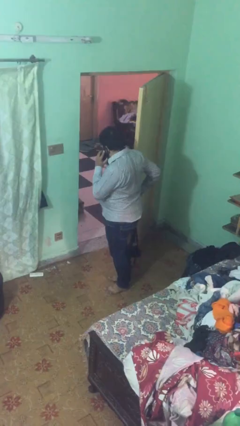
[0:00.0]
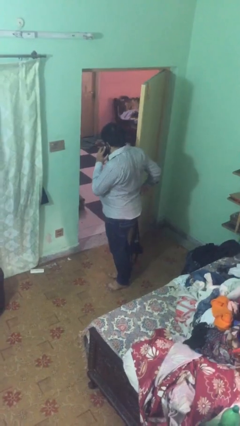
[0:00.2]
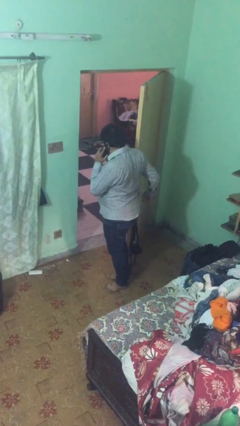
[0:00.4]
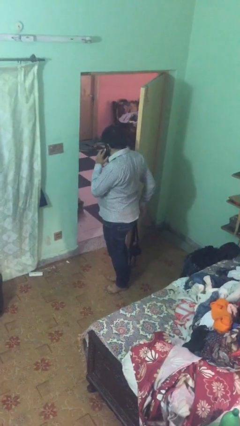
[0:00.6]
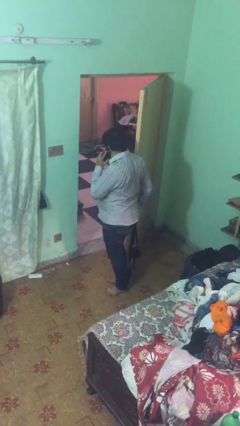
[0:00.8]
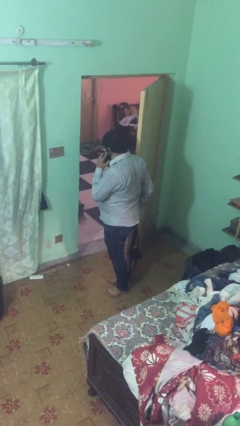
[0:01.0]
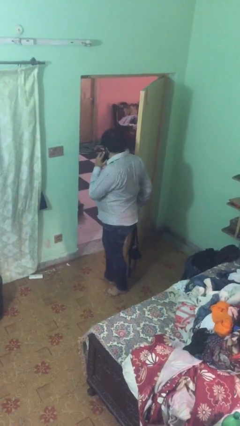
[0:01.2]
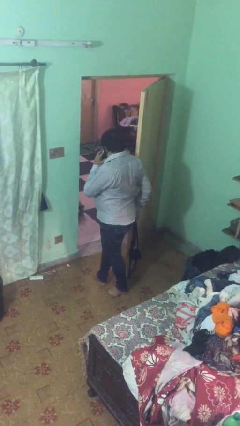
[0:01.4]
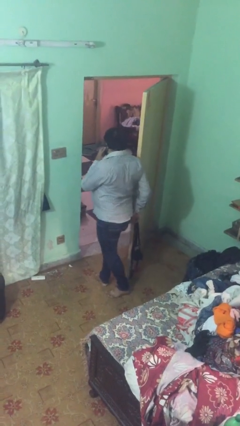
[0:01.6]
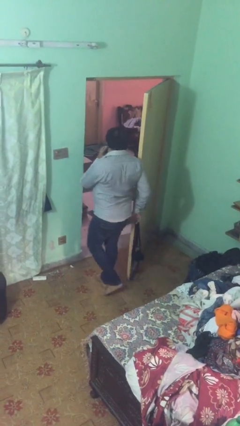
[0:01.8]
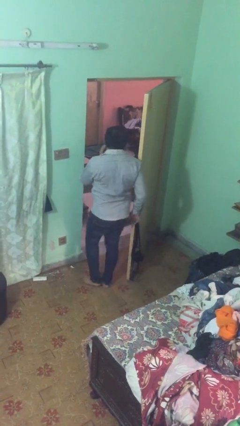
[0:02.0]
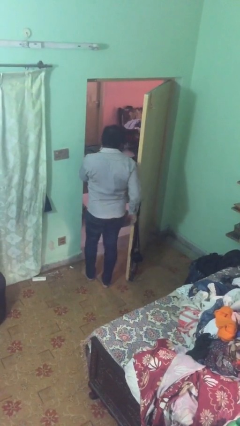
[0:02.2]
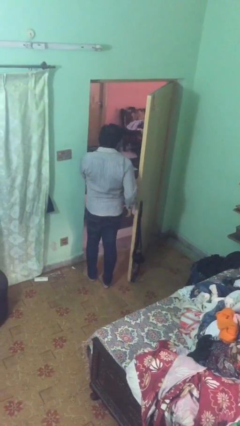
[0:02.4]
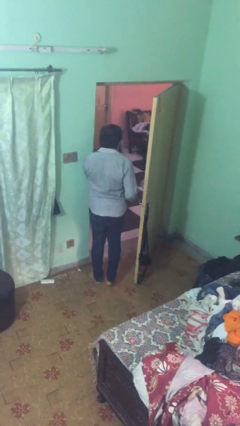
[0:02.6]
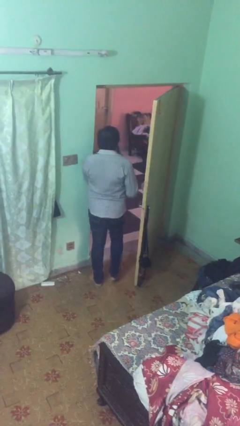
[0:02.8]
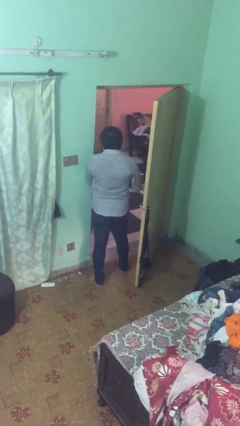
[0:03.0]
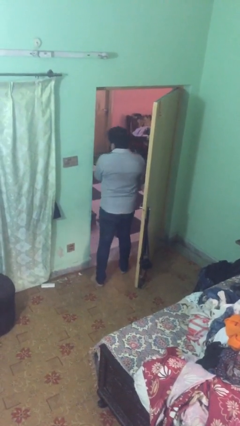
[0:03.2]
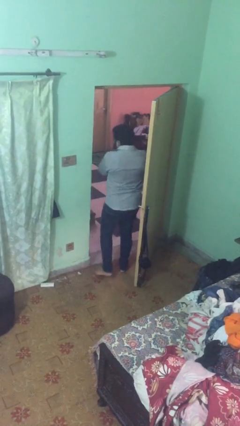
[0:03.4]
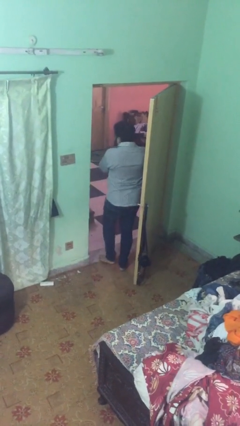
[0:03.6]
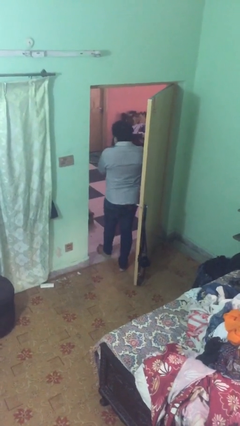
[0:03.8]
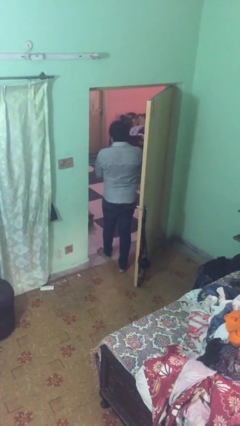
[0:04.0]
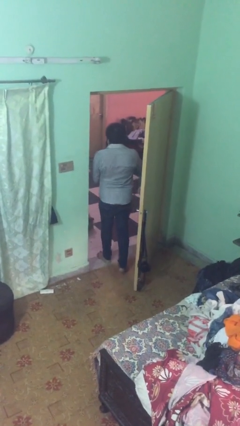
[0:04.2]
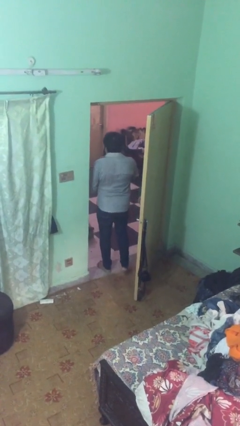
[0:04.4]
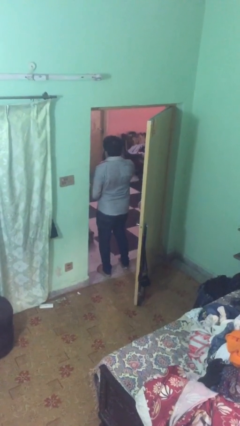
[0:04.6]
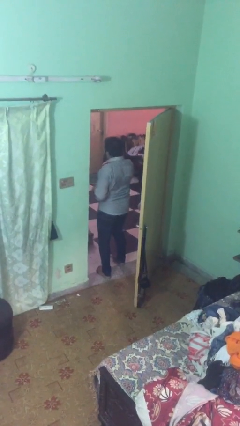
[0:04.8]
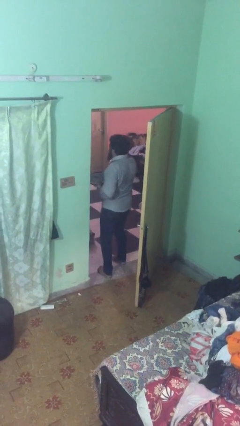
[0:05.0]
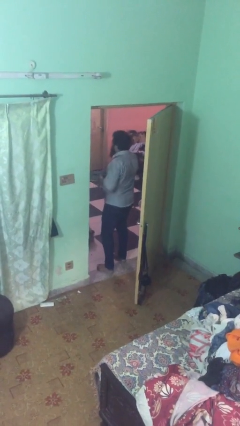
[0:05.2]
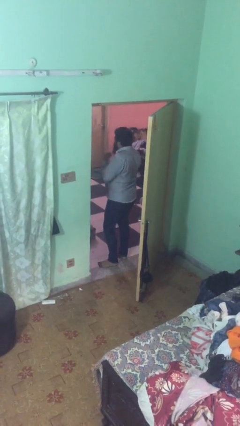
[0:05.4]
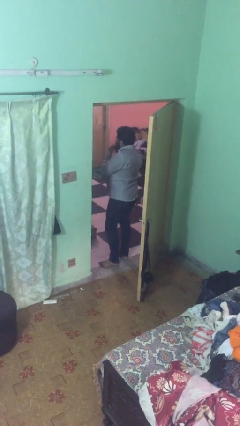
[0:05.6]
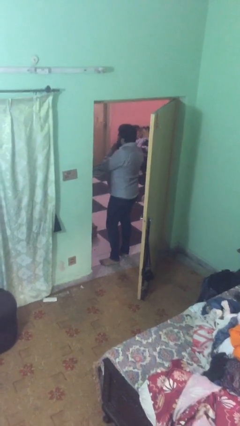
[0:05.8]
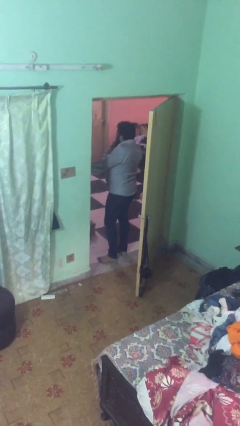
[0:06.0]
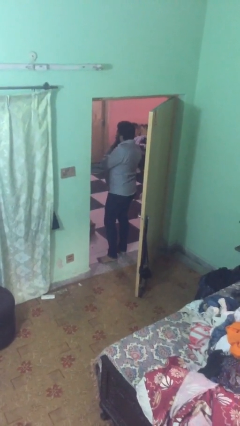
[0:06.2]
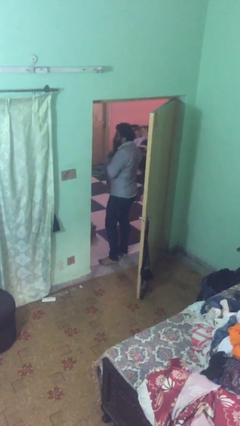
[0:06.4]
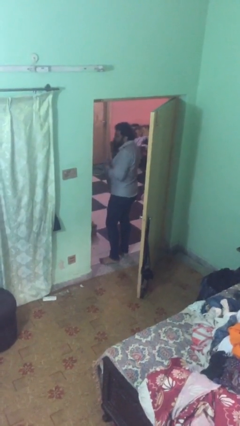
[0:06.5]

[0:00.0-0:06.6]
person exits scene through structure

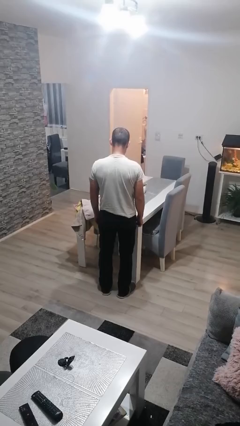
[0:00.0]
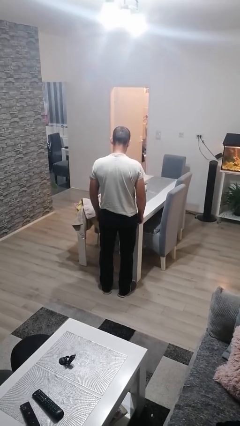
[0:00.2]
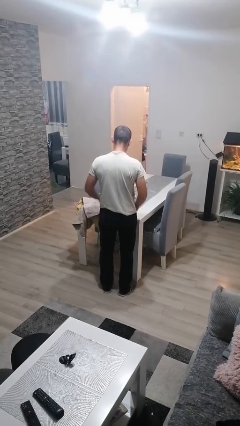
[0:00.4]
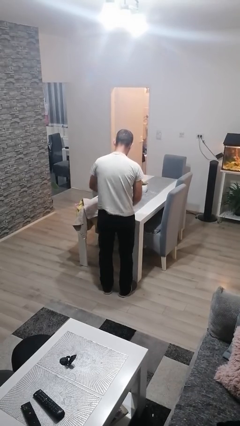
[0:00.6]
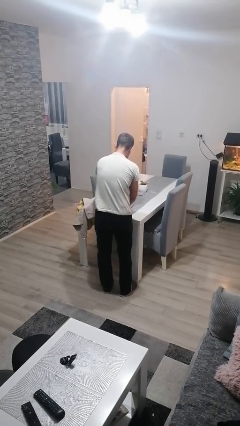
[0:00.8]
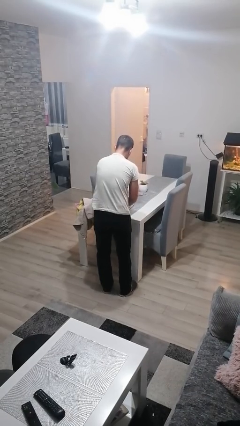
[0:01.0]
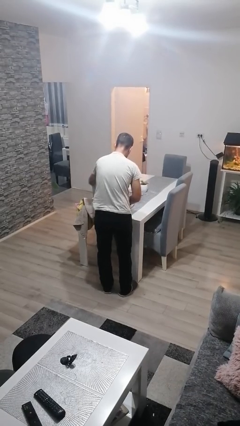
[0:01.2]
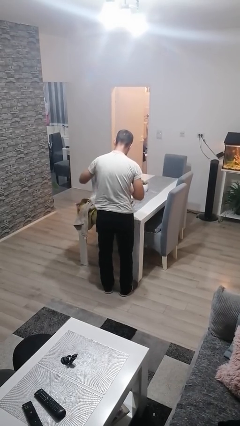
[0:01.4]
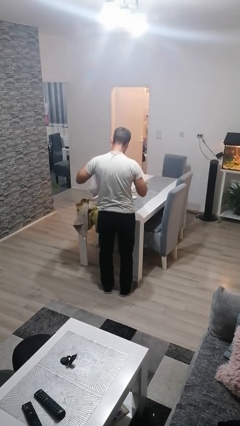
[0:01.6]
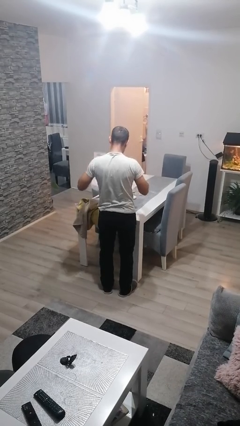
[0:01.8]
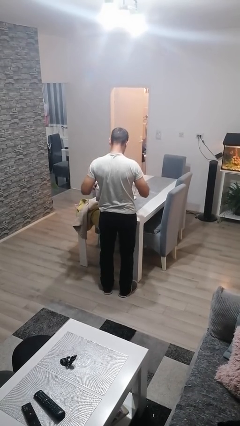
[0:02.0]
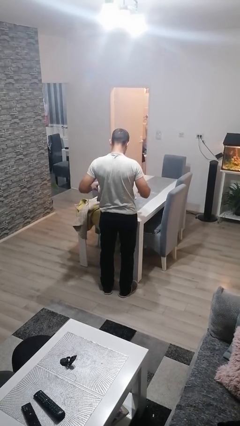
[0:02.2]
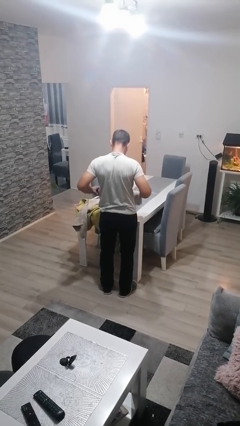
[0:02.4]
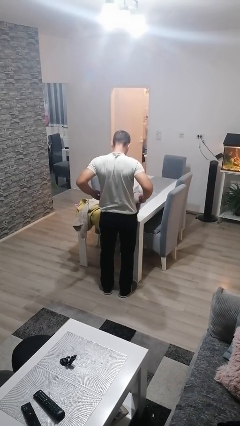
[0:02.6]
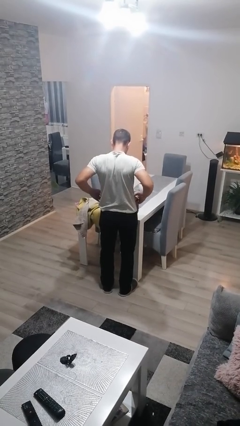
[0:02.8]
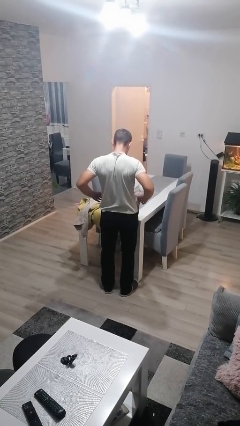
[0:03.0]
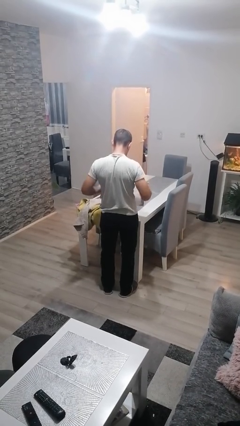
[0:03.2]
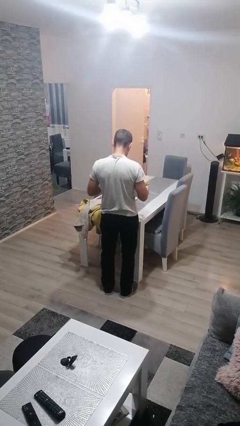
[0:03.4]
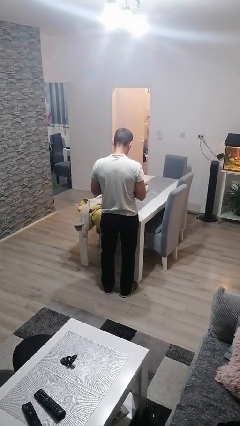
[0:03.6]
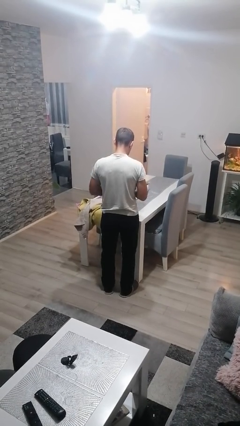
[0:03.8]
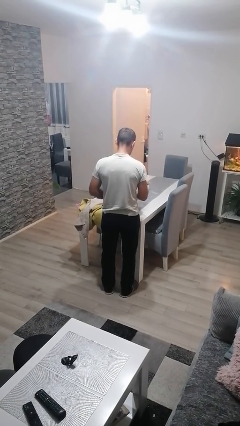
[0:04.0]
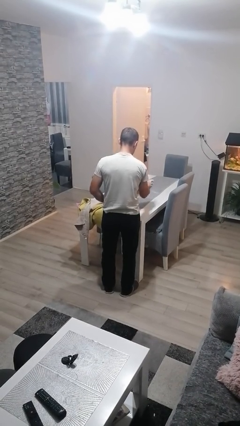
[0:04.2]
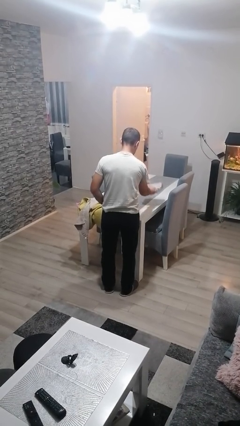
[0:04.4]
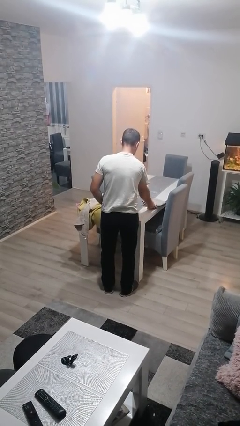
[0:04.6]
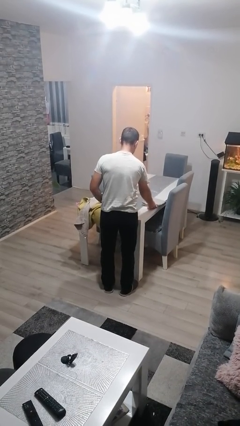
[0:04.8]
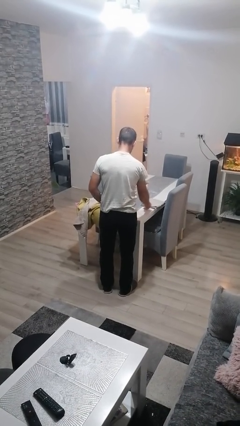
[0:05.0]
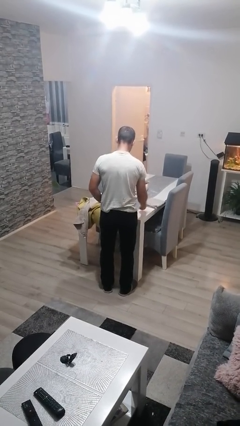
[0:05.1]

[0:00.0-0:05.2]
person folds towel

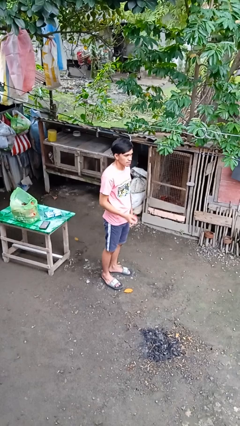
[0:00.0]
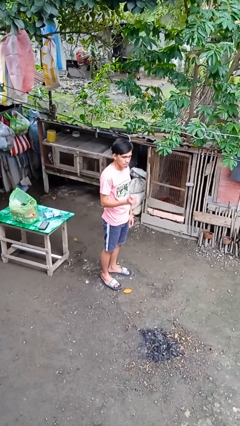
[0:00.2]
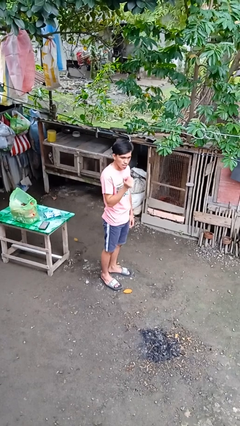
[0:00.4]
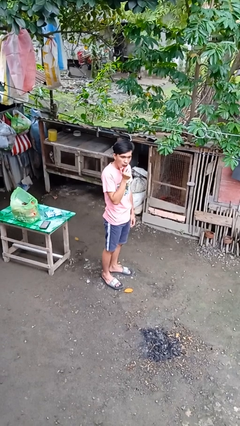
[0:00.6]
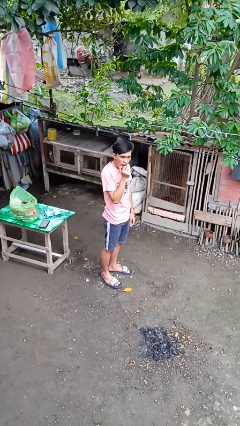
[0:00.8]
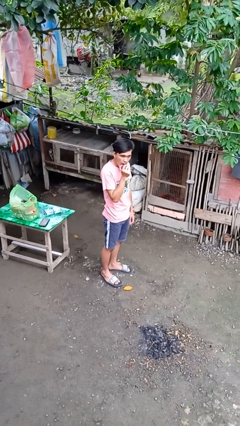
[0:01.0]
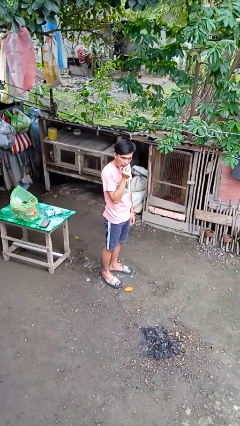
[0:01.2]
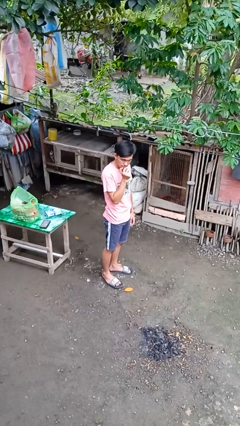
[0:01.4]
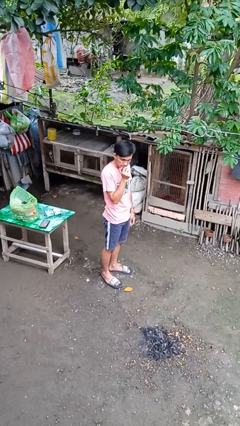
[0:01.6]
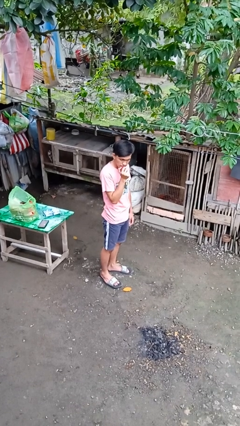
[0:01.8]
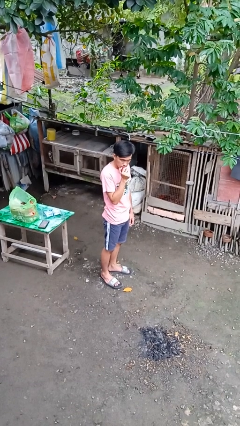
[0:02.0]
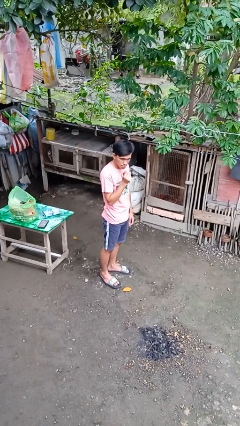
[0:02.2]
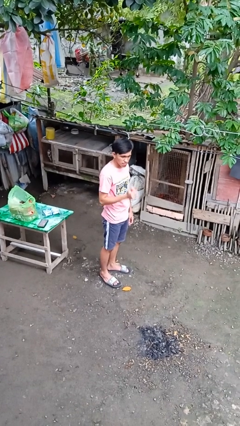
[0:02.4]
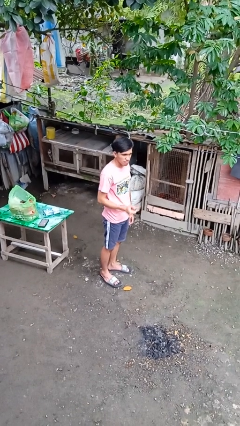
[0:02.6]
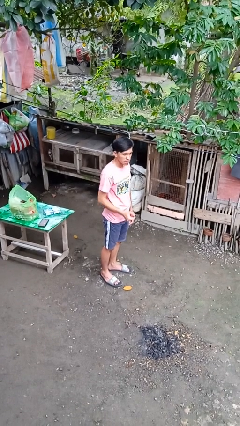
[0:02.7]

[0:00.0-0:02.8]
person eats apple

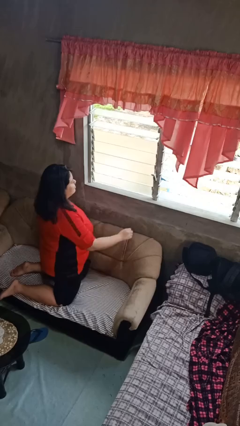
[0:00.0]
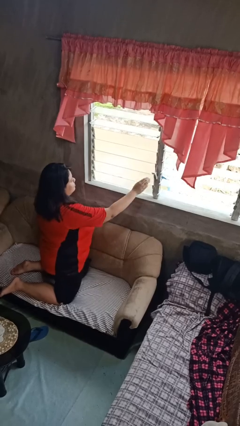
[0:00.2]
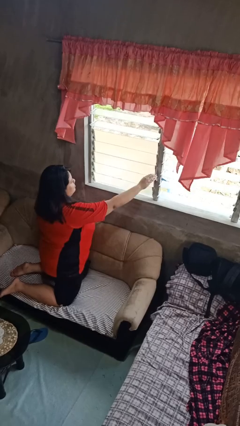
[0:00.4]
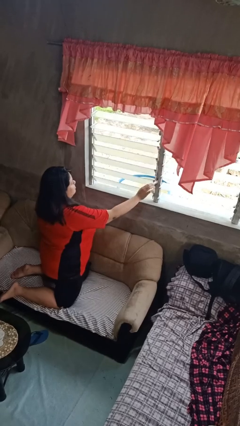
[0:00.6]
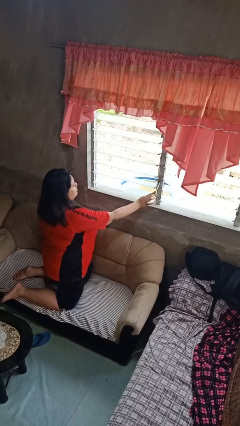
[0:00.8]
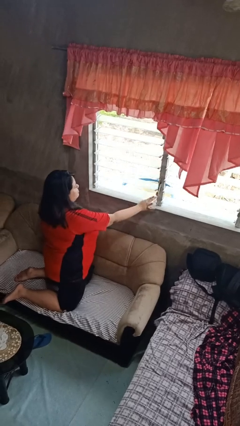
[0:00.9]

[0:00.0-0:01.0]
person opens home window

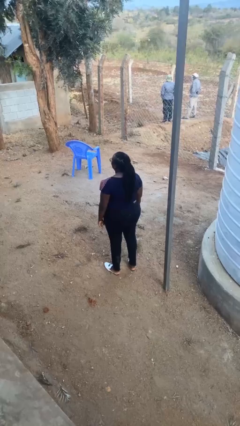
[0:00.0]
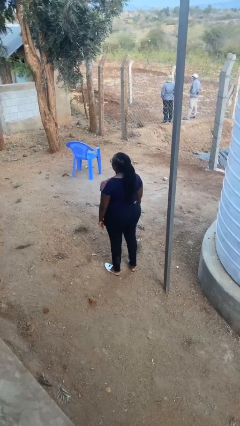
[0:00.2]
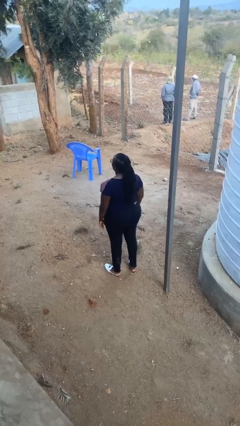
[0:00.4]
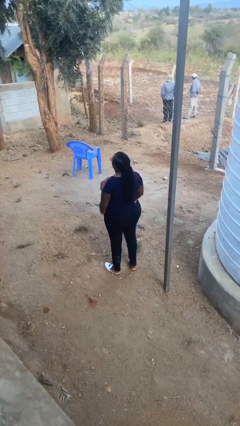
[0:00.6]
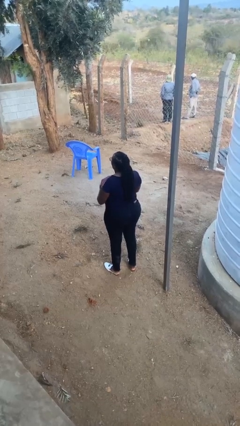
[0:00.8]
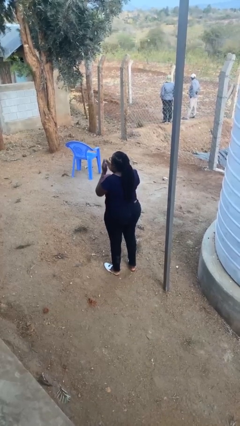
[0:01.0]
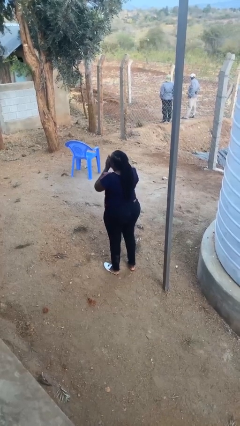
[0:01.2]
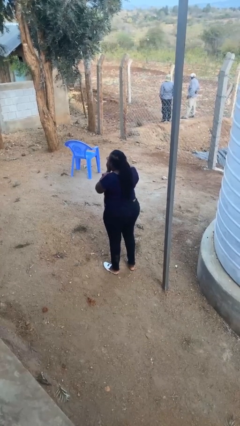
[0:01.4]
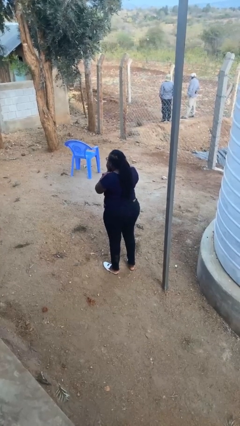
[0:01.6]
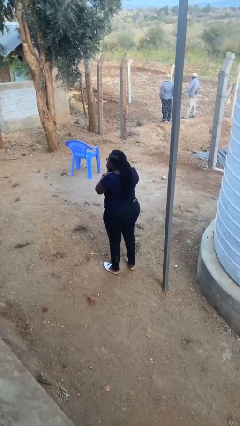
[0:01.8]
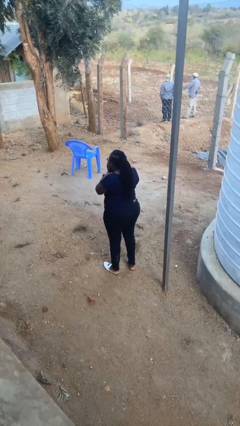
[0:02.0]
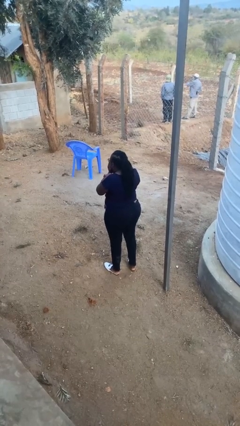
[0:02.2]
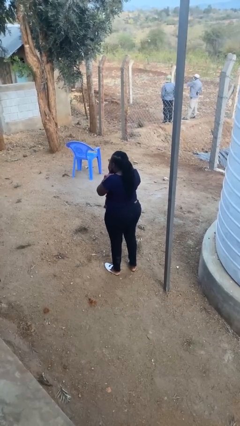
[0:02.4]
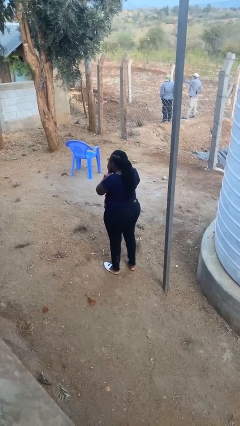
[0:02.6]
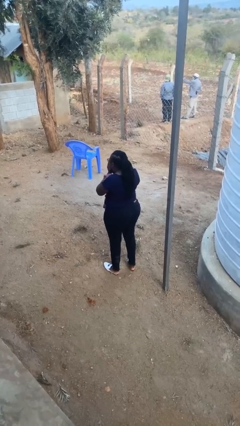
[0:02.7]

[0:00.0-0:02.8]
person sneezes into hand
